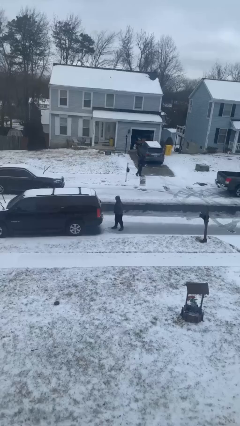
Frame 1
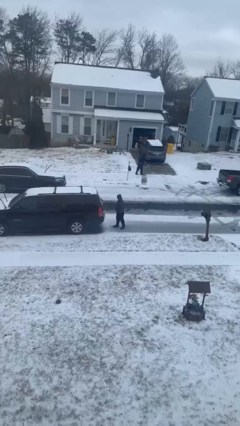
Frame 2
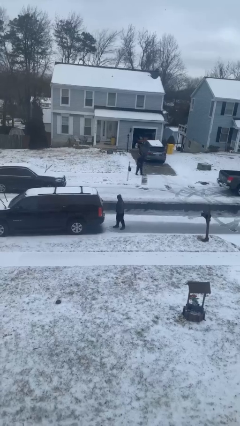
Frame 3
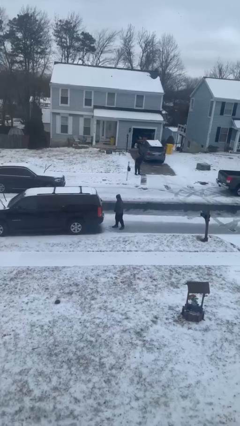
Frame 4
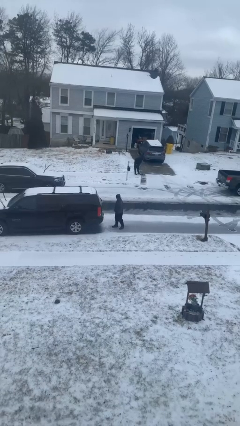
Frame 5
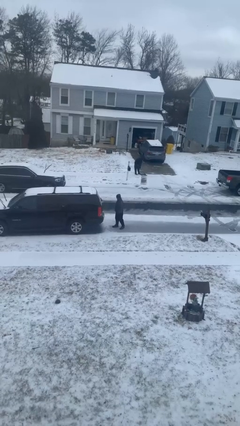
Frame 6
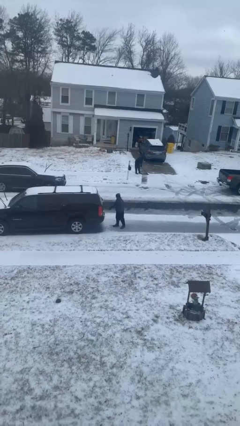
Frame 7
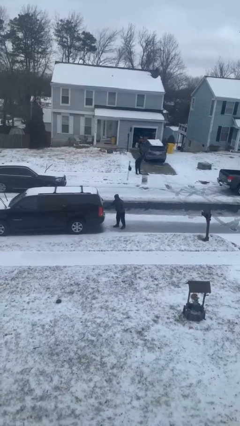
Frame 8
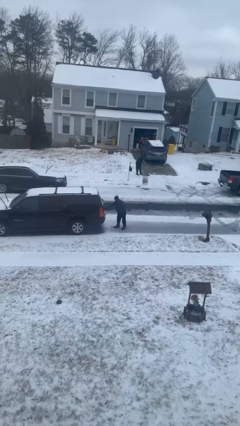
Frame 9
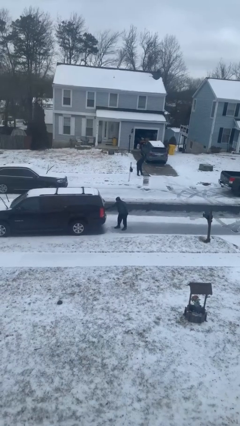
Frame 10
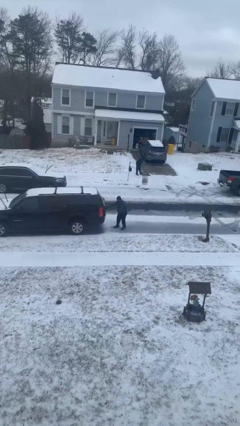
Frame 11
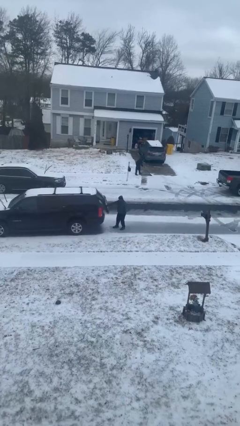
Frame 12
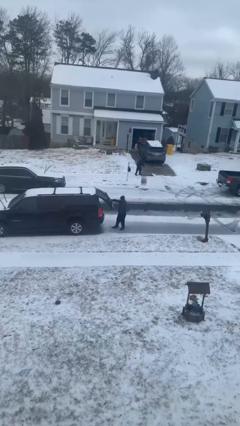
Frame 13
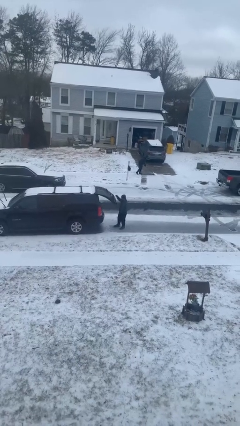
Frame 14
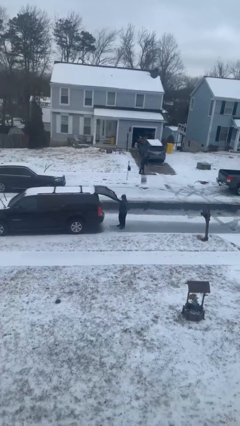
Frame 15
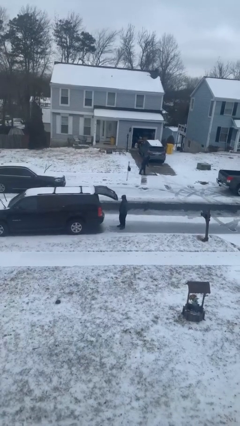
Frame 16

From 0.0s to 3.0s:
person opens car trunk

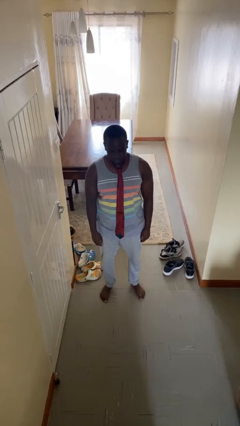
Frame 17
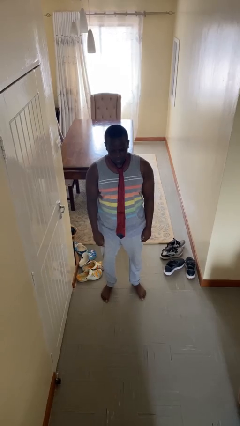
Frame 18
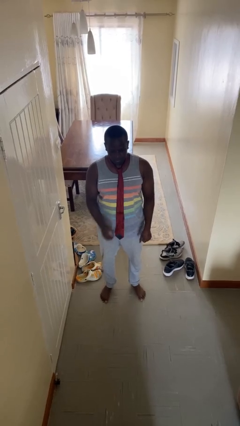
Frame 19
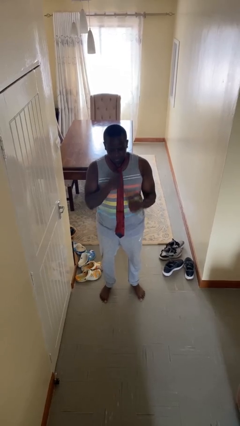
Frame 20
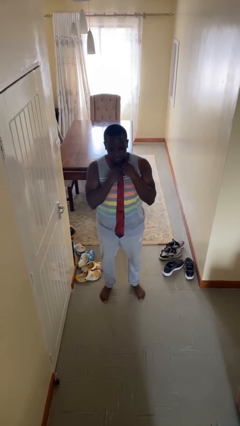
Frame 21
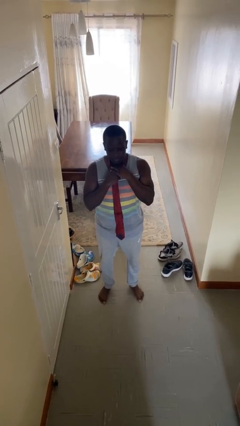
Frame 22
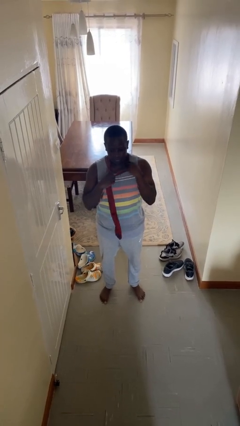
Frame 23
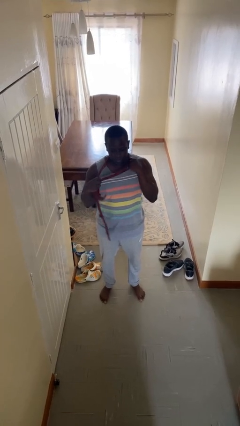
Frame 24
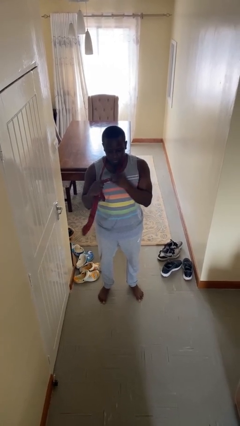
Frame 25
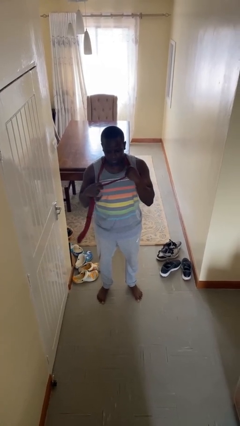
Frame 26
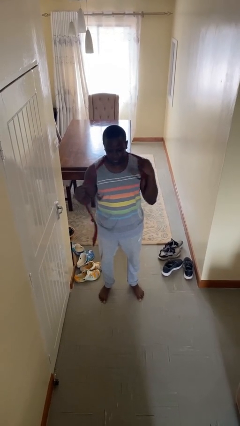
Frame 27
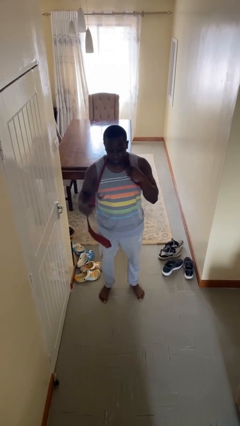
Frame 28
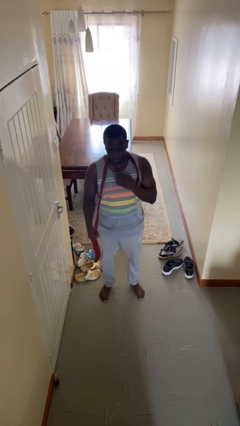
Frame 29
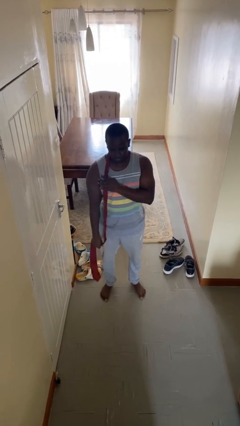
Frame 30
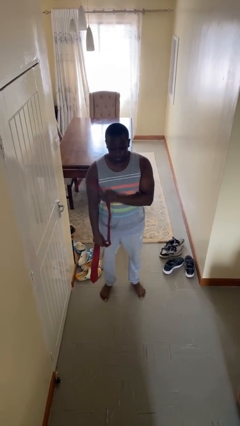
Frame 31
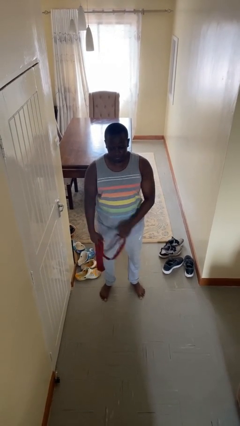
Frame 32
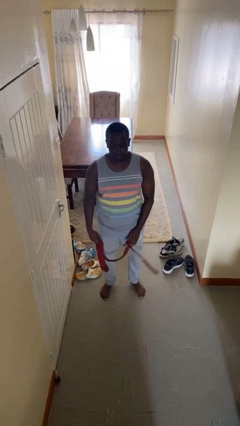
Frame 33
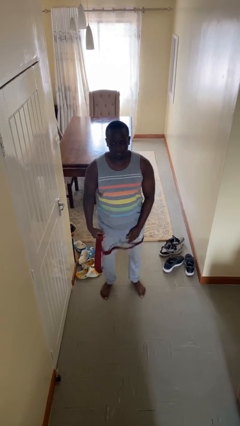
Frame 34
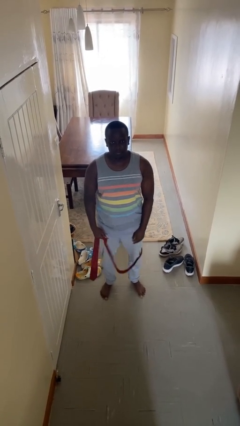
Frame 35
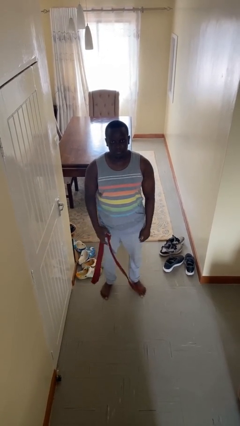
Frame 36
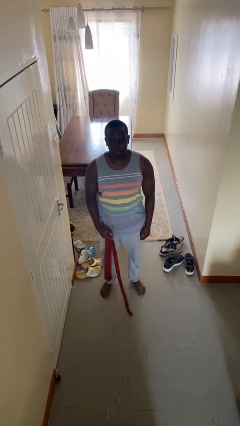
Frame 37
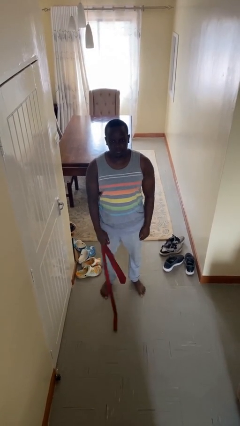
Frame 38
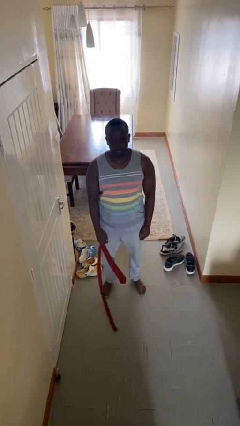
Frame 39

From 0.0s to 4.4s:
person takes off necktie

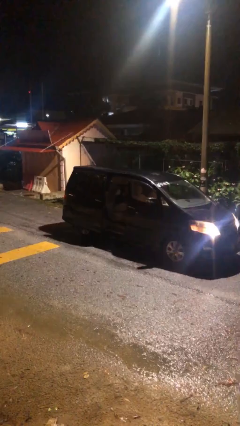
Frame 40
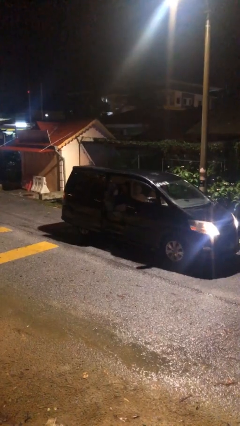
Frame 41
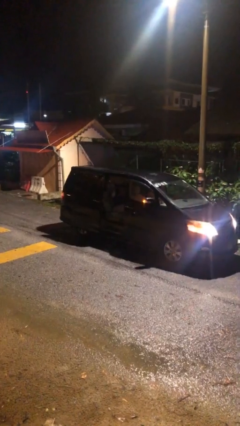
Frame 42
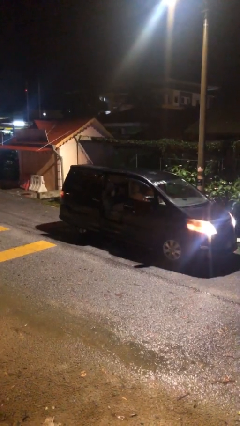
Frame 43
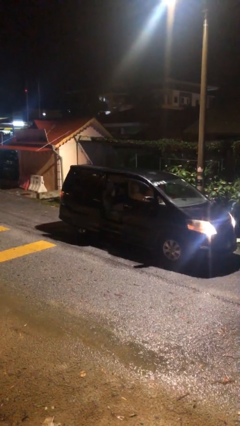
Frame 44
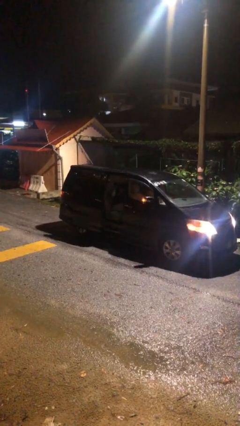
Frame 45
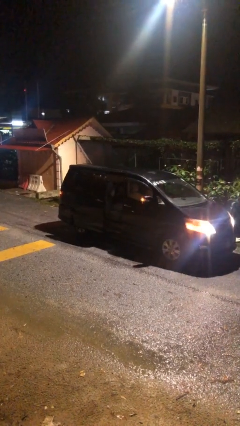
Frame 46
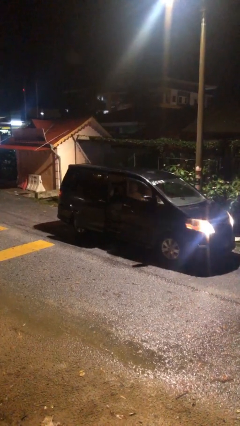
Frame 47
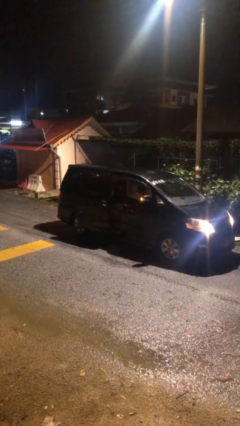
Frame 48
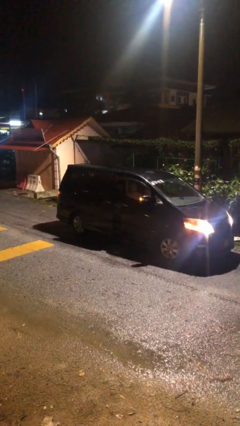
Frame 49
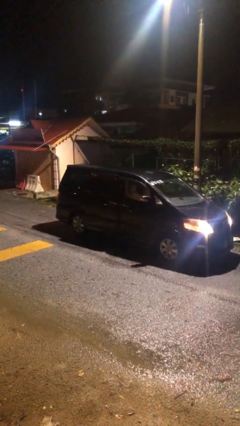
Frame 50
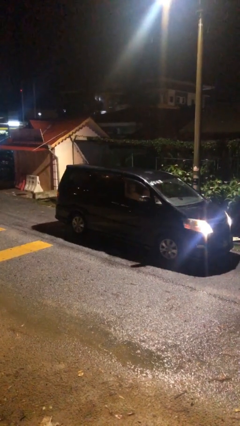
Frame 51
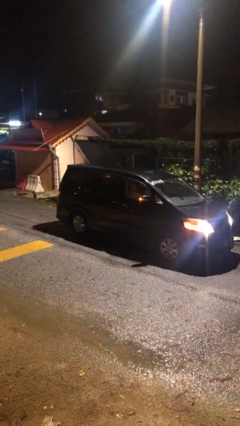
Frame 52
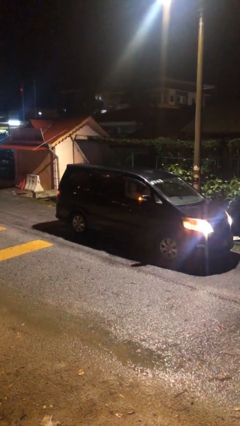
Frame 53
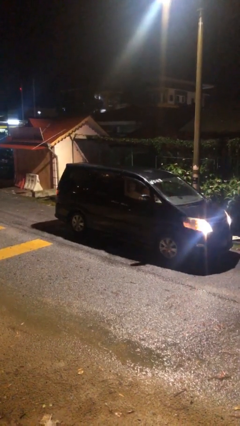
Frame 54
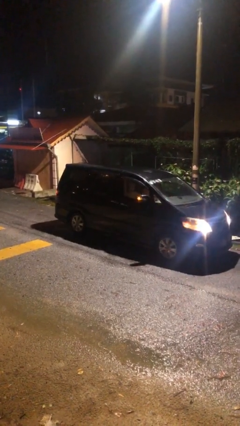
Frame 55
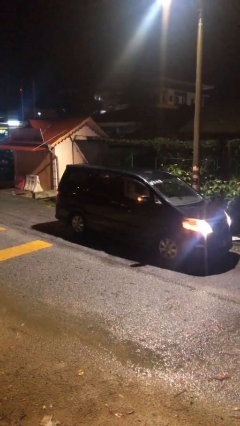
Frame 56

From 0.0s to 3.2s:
person closes car door

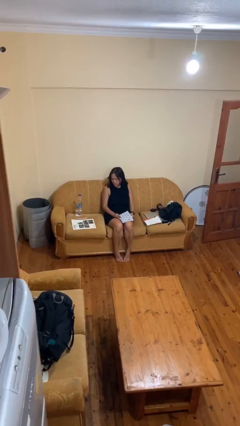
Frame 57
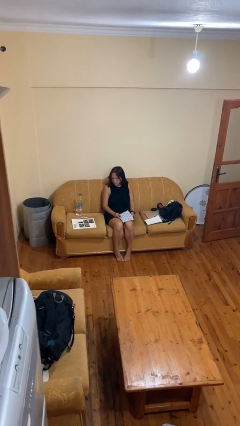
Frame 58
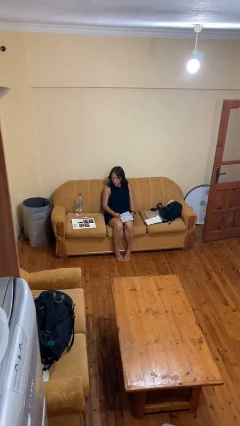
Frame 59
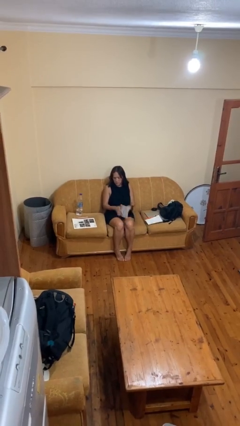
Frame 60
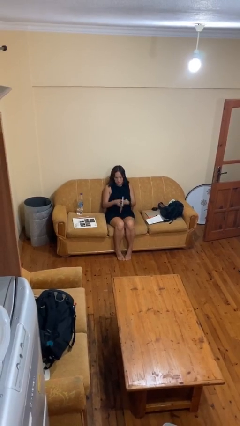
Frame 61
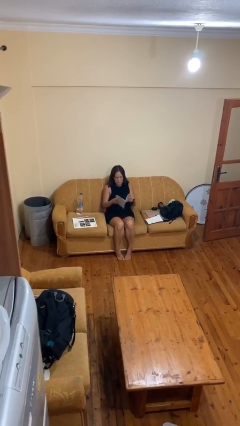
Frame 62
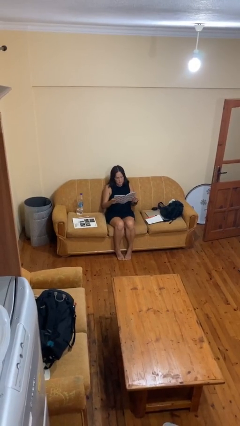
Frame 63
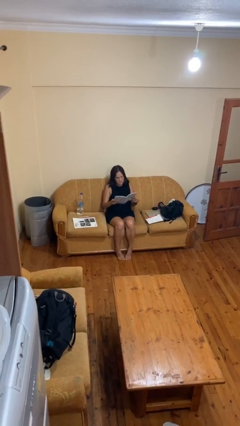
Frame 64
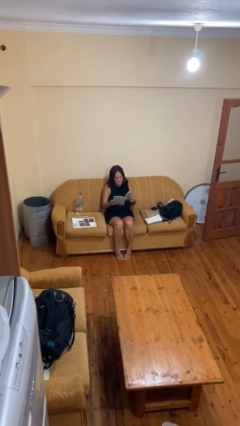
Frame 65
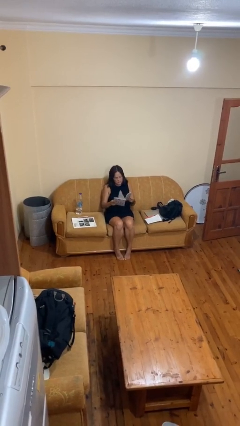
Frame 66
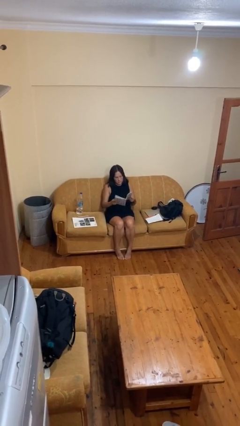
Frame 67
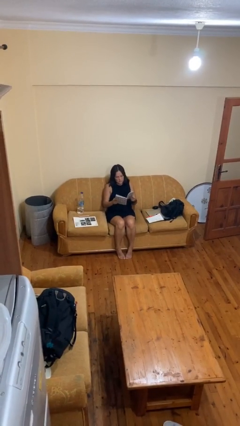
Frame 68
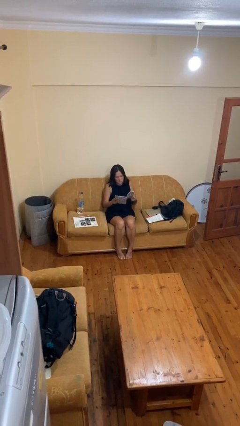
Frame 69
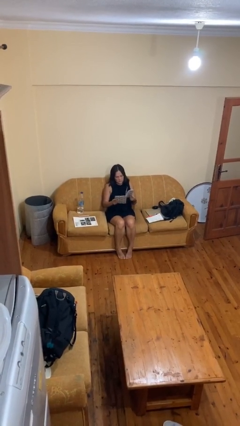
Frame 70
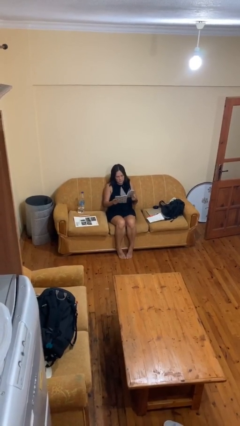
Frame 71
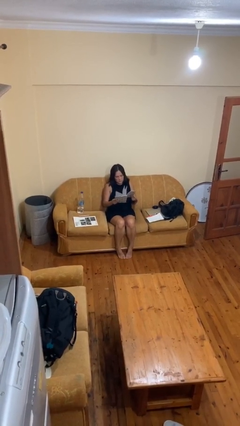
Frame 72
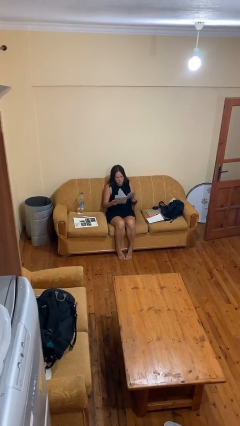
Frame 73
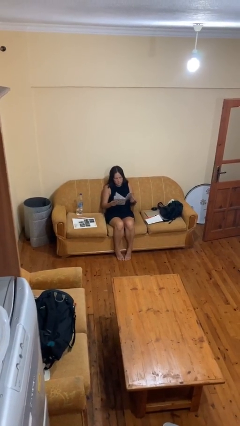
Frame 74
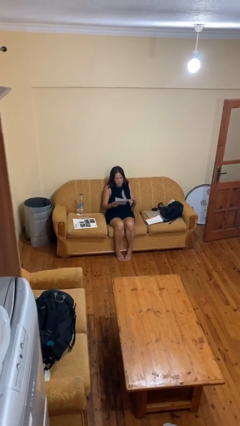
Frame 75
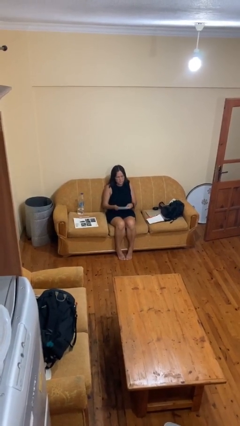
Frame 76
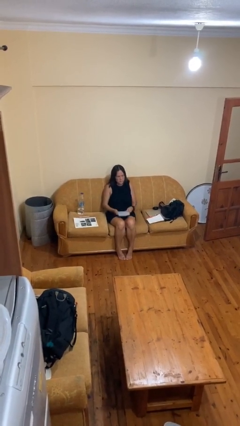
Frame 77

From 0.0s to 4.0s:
person reads book

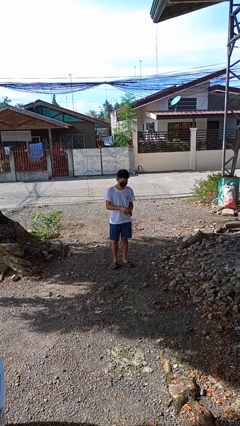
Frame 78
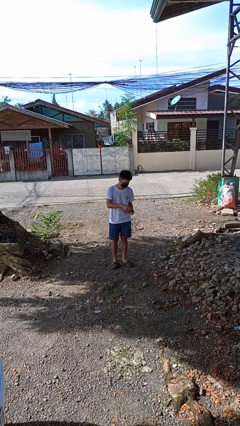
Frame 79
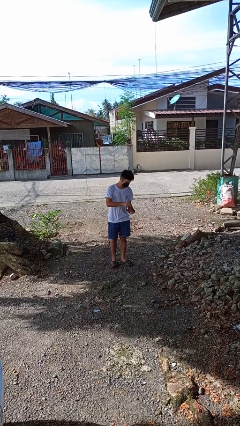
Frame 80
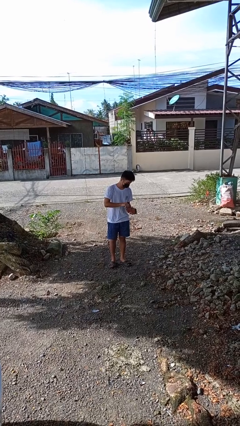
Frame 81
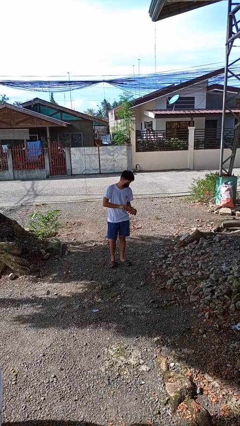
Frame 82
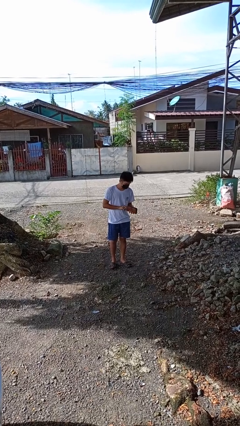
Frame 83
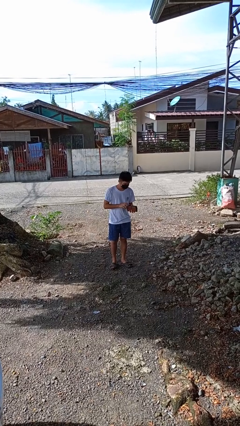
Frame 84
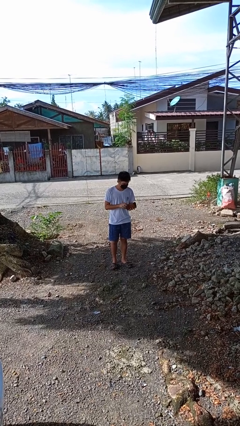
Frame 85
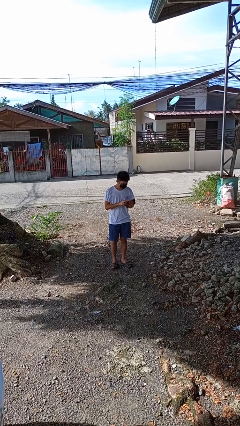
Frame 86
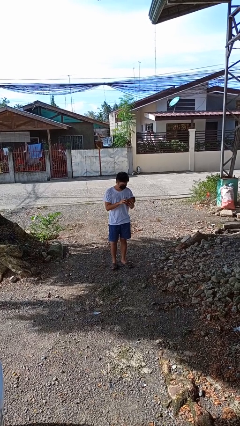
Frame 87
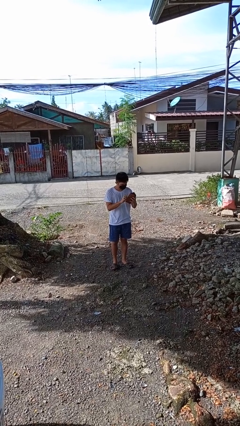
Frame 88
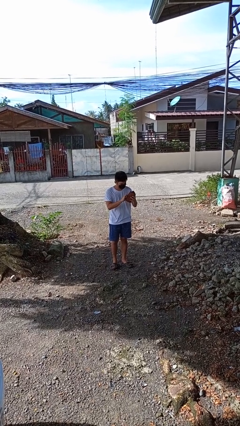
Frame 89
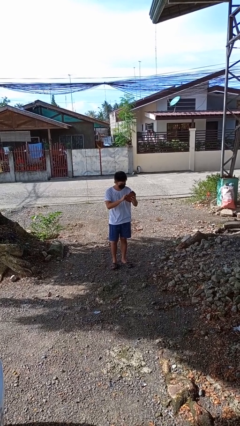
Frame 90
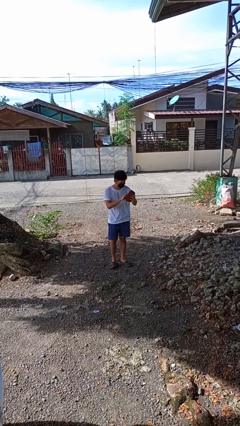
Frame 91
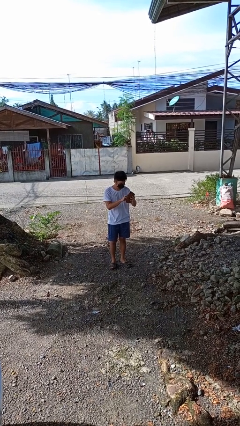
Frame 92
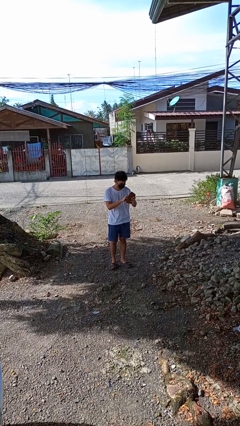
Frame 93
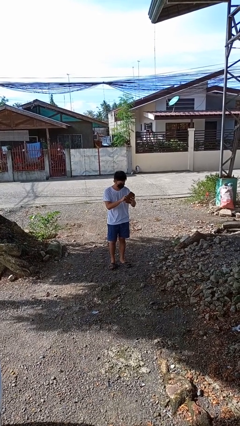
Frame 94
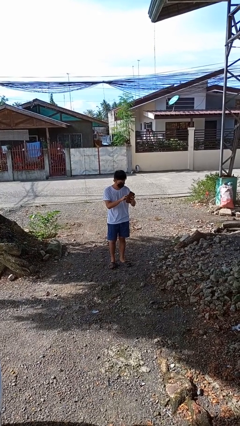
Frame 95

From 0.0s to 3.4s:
person searches in purse
